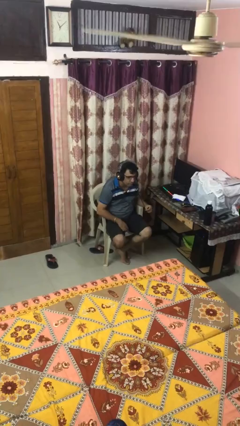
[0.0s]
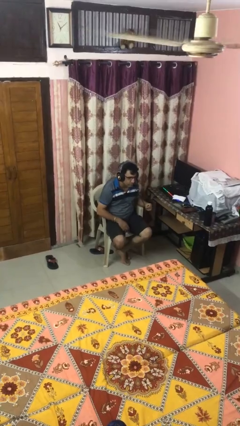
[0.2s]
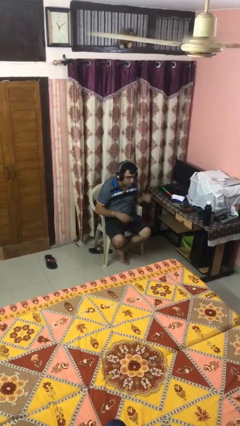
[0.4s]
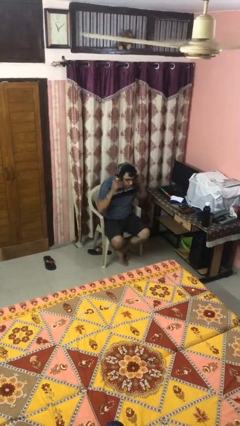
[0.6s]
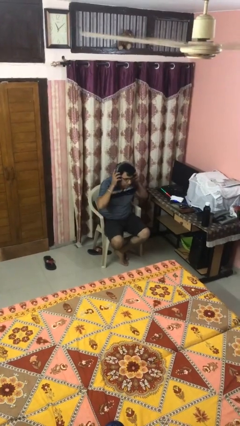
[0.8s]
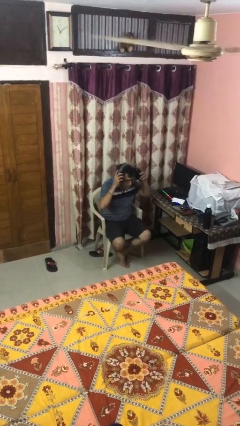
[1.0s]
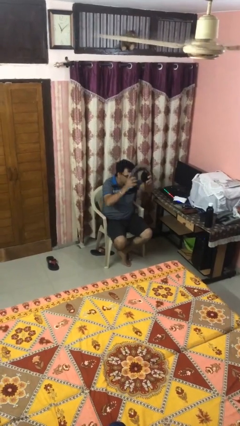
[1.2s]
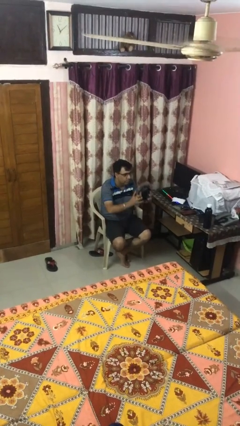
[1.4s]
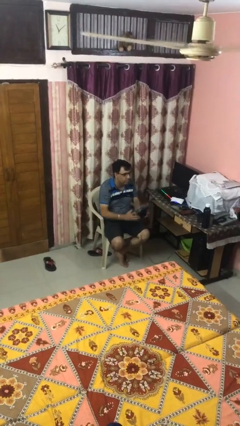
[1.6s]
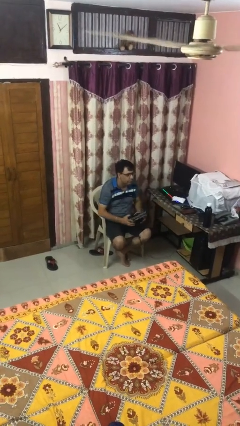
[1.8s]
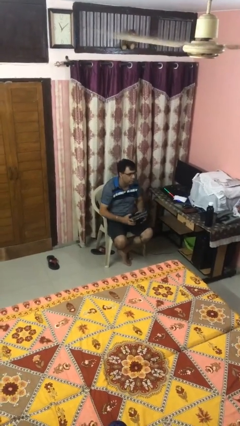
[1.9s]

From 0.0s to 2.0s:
person takes off headphones

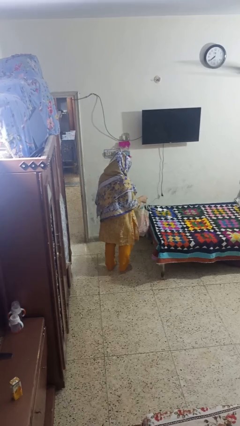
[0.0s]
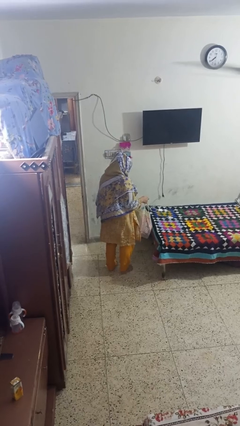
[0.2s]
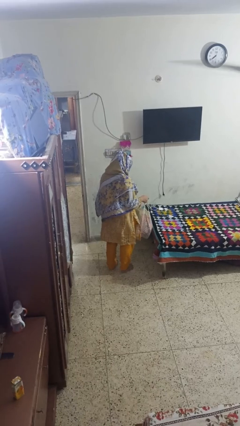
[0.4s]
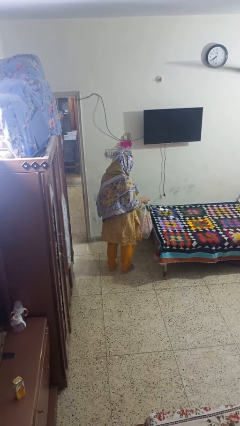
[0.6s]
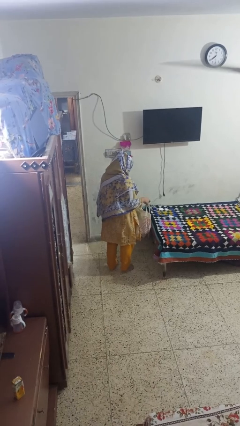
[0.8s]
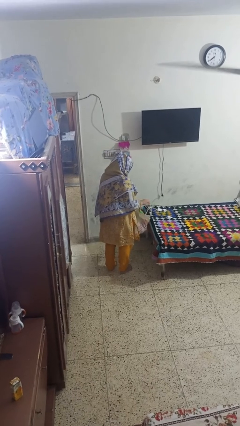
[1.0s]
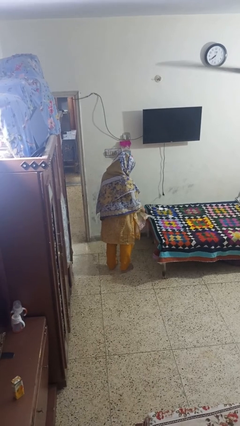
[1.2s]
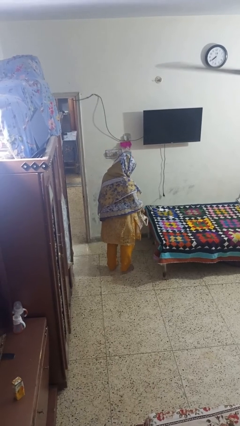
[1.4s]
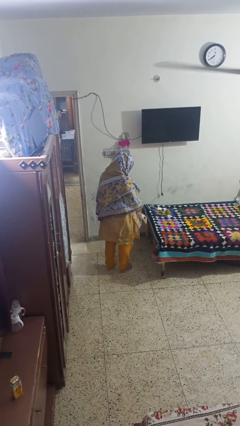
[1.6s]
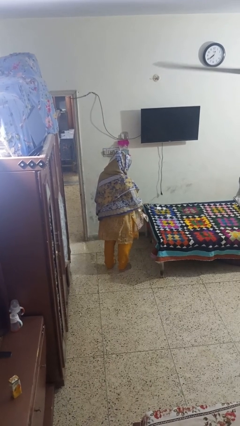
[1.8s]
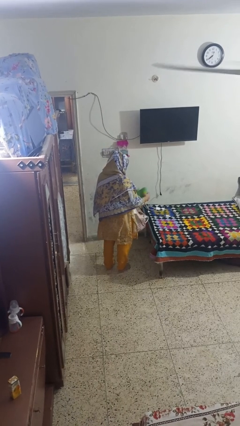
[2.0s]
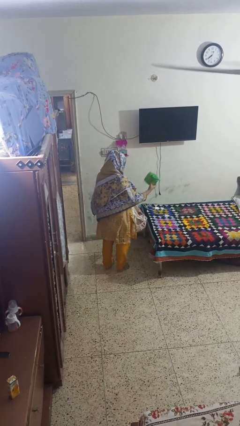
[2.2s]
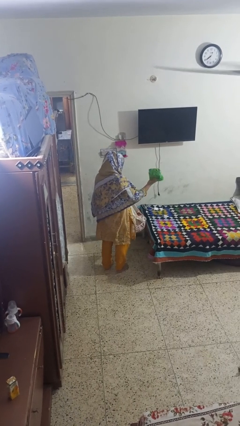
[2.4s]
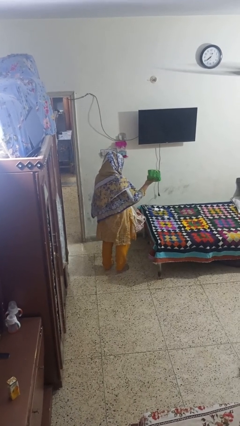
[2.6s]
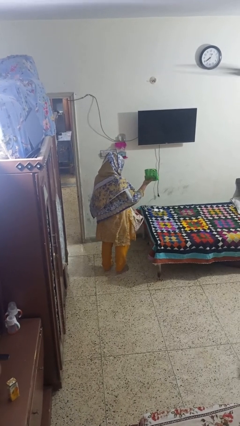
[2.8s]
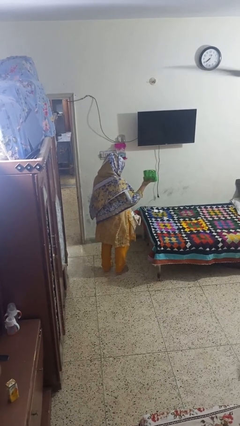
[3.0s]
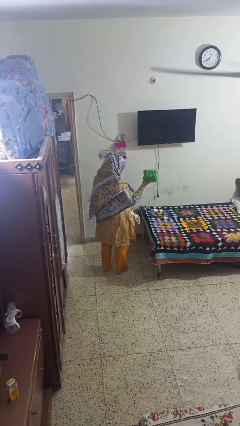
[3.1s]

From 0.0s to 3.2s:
person takes object from bag

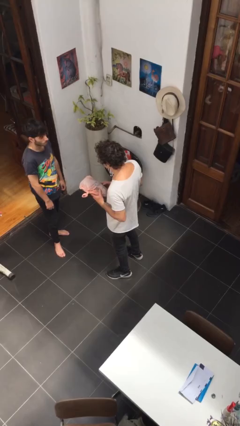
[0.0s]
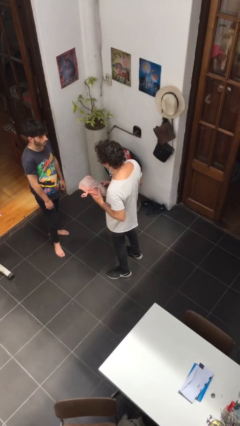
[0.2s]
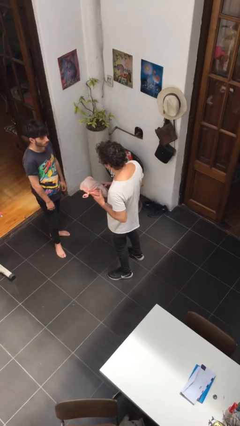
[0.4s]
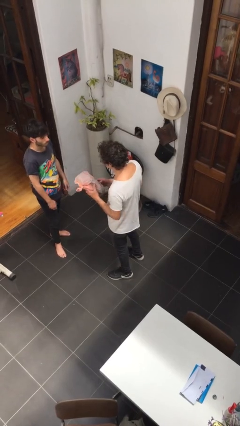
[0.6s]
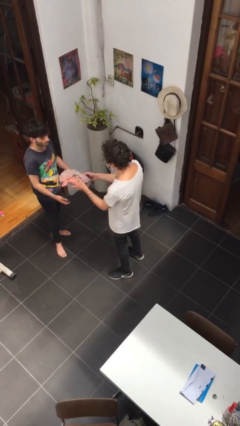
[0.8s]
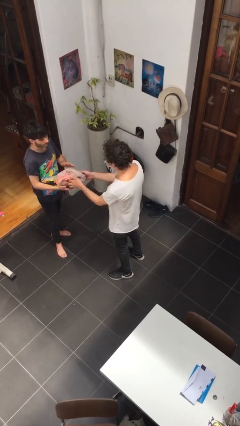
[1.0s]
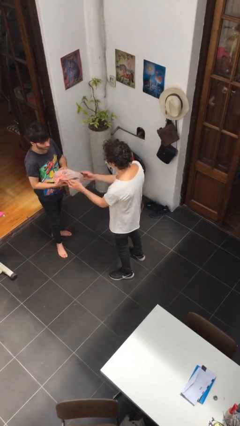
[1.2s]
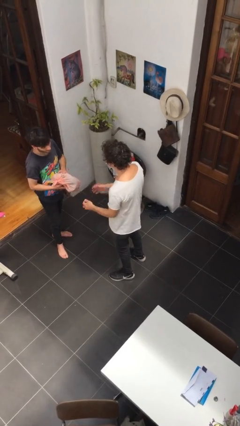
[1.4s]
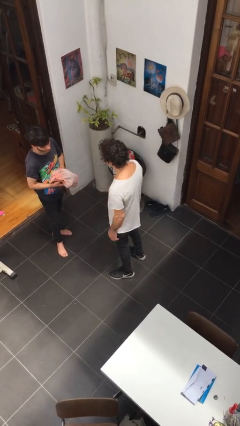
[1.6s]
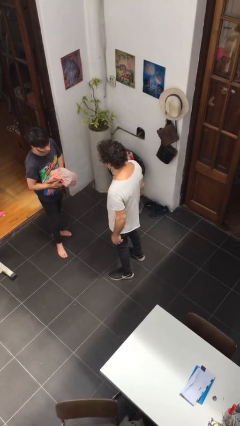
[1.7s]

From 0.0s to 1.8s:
person transfers object to person

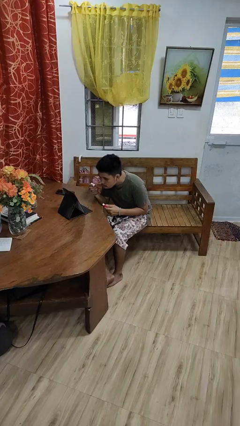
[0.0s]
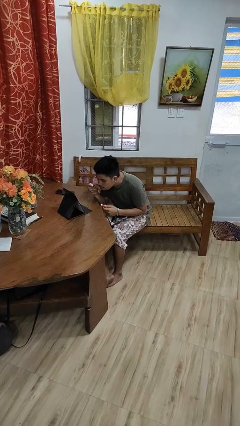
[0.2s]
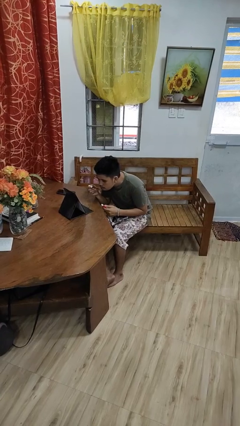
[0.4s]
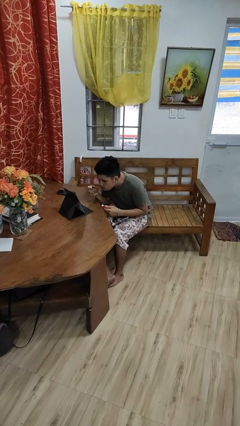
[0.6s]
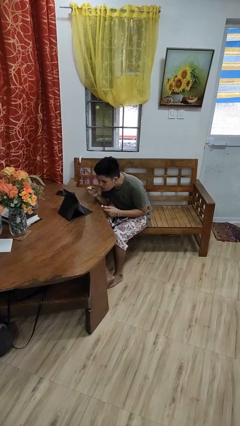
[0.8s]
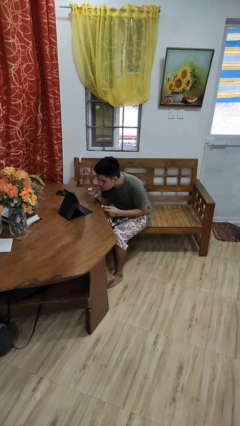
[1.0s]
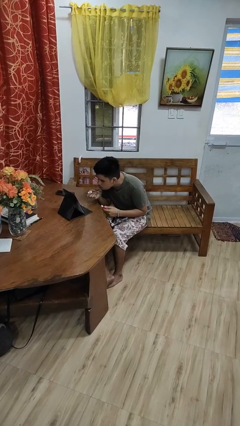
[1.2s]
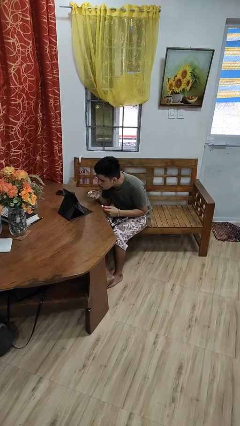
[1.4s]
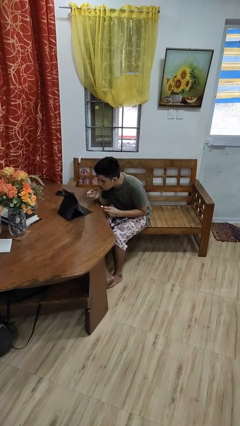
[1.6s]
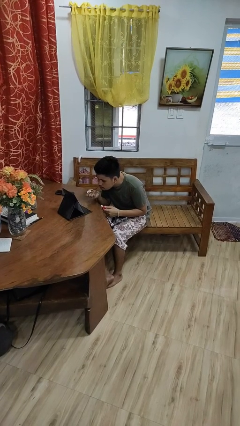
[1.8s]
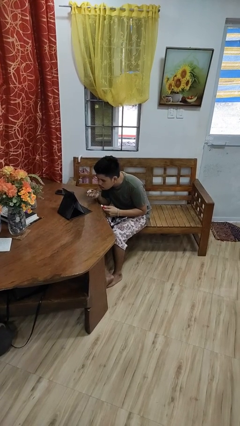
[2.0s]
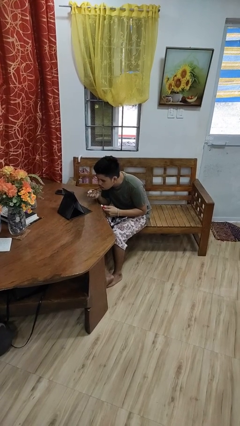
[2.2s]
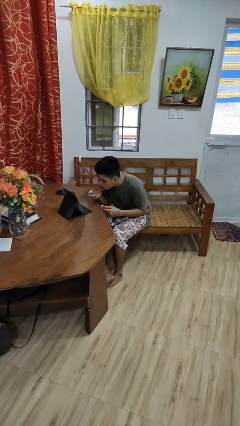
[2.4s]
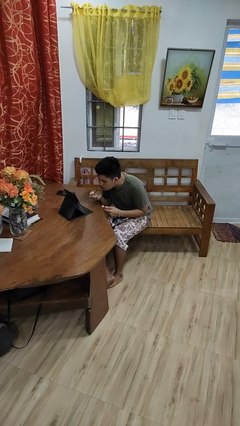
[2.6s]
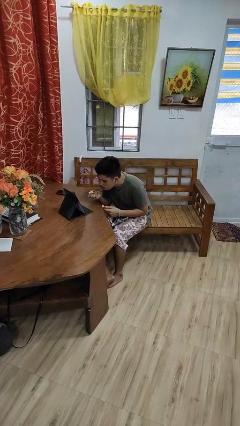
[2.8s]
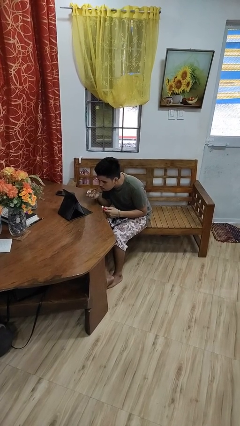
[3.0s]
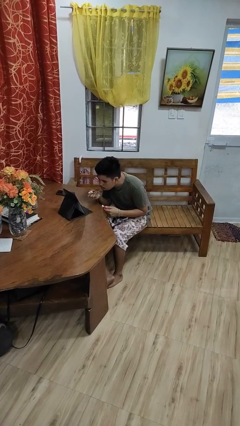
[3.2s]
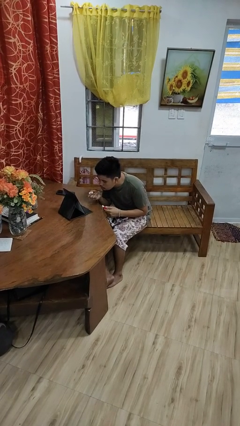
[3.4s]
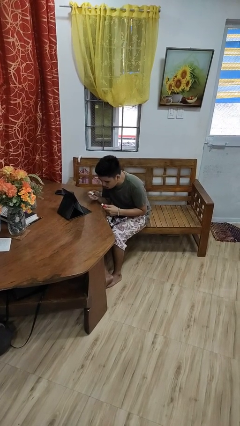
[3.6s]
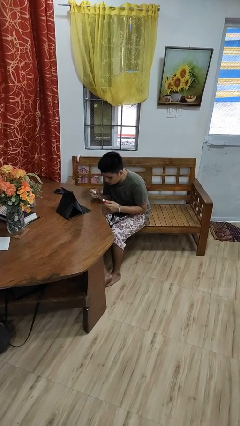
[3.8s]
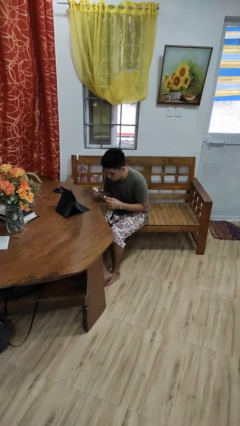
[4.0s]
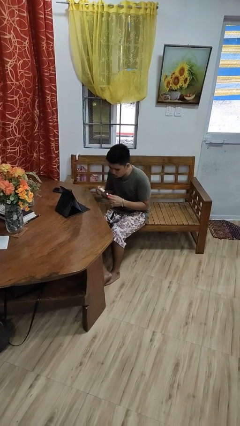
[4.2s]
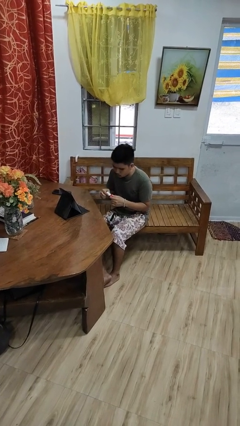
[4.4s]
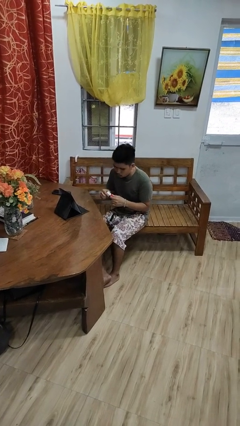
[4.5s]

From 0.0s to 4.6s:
person applies lip makeup

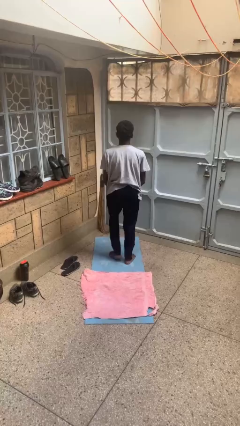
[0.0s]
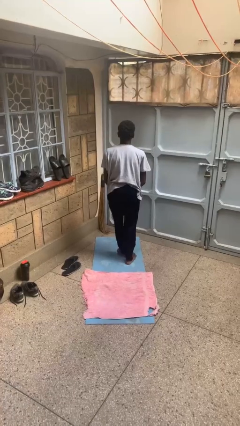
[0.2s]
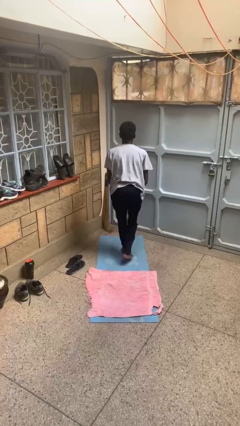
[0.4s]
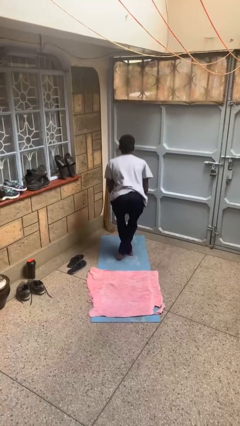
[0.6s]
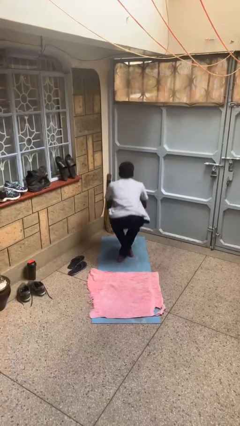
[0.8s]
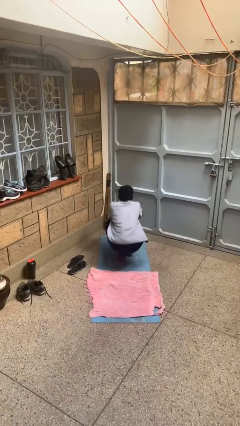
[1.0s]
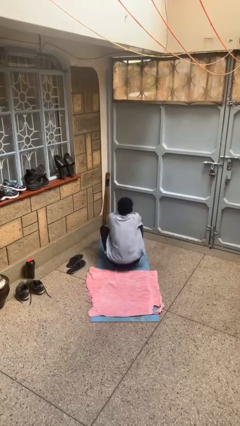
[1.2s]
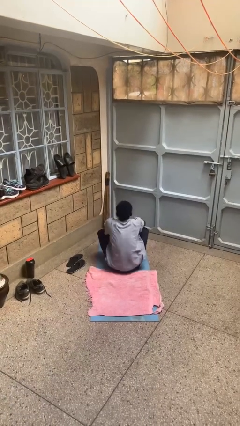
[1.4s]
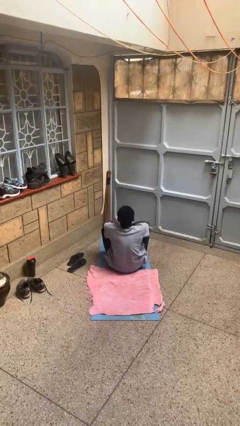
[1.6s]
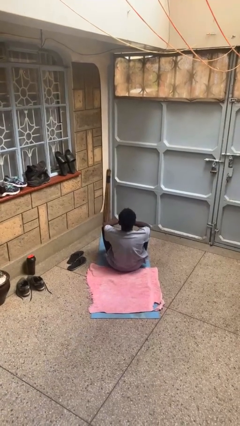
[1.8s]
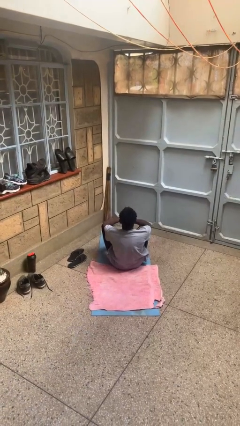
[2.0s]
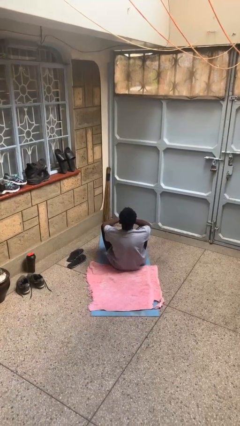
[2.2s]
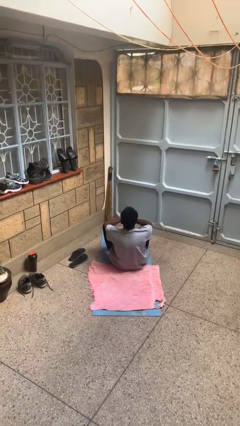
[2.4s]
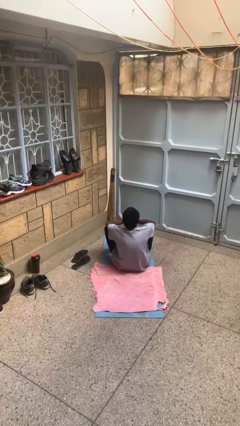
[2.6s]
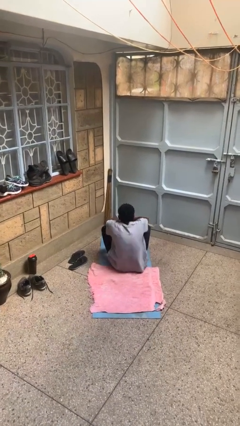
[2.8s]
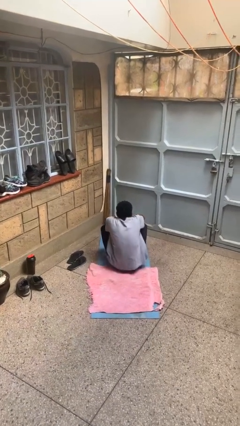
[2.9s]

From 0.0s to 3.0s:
person sits crisscross

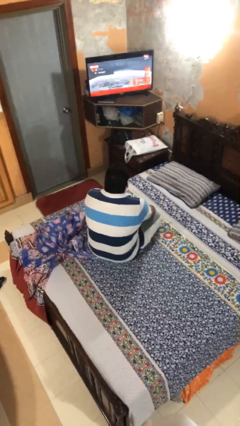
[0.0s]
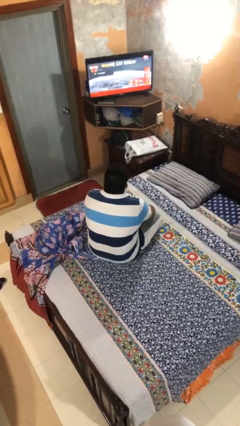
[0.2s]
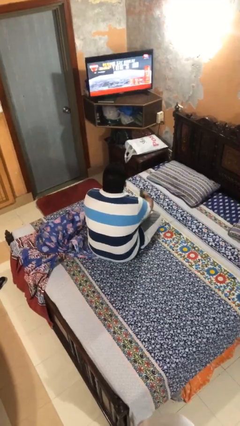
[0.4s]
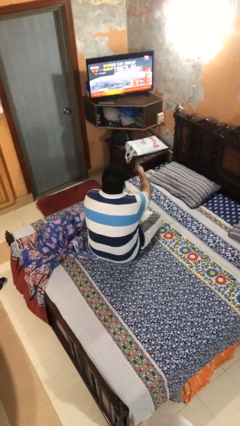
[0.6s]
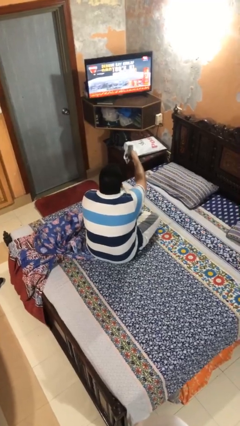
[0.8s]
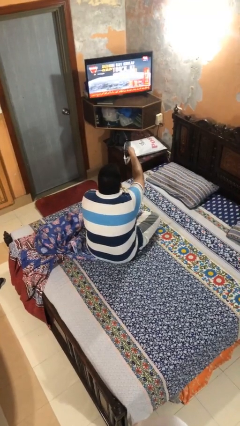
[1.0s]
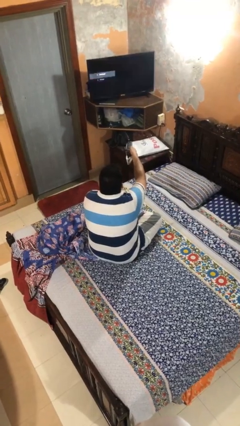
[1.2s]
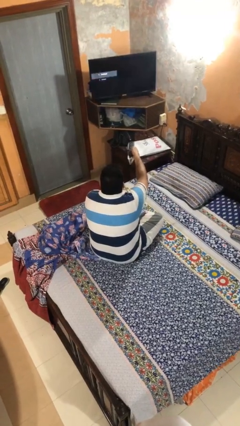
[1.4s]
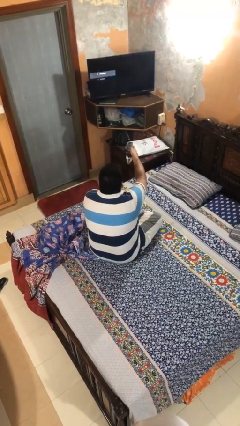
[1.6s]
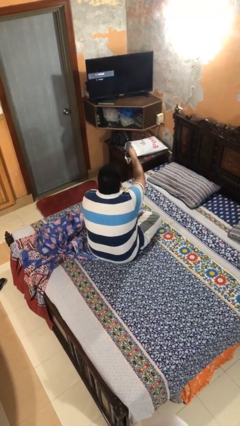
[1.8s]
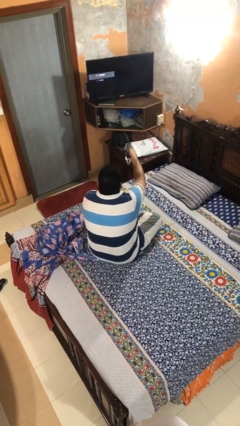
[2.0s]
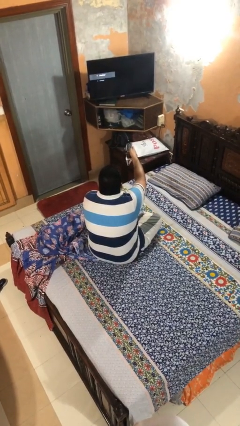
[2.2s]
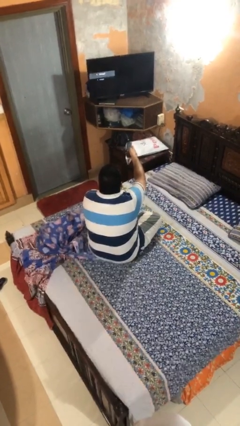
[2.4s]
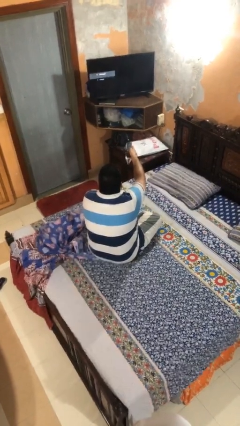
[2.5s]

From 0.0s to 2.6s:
person uses television remote
